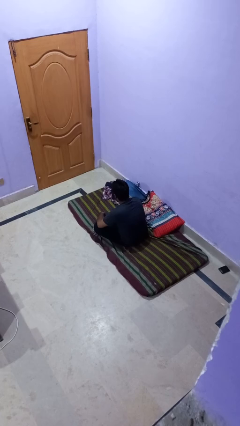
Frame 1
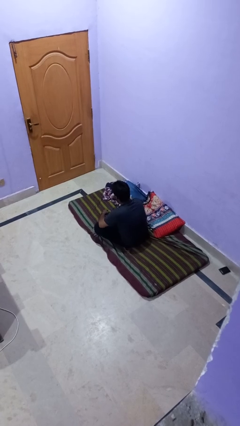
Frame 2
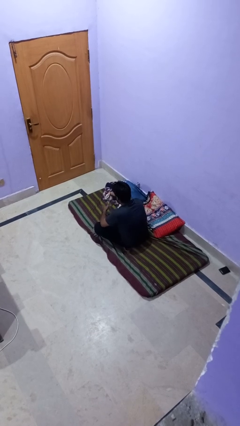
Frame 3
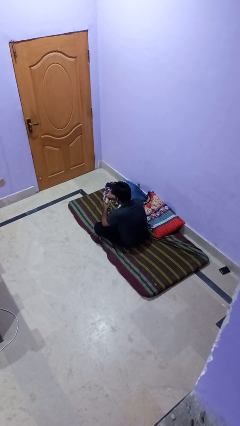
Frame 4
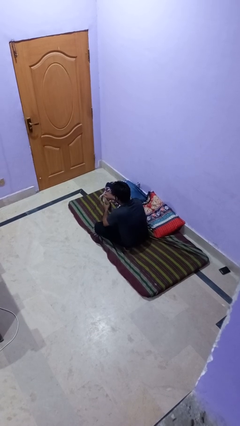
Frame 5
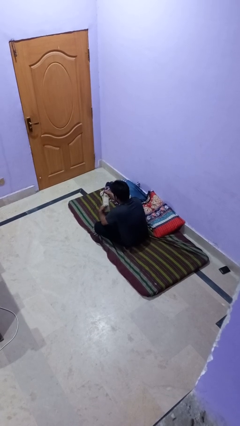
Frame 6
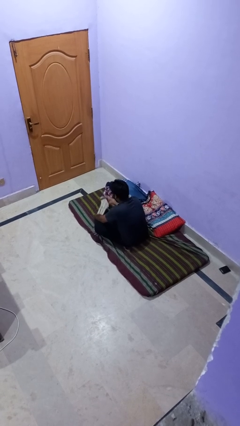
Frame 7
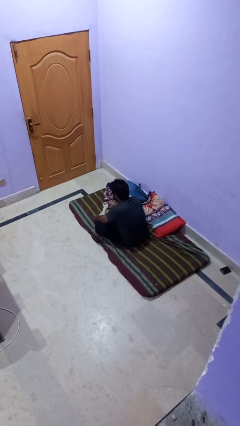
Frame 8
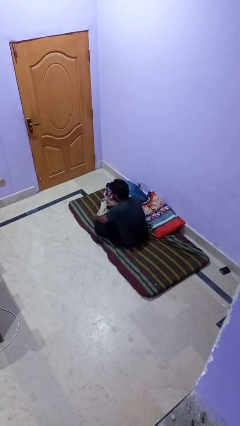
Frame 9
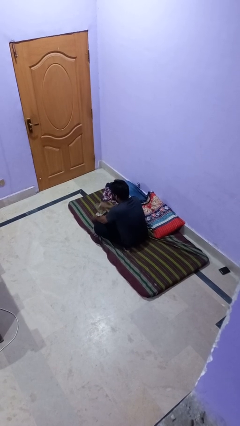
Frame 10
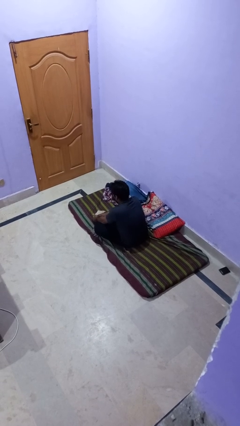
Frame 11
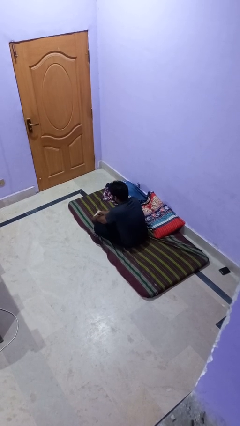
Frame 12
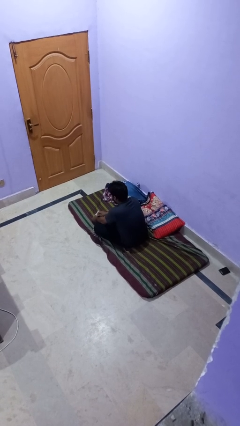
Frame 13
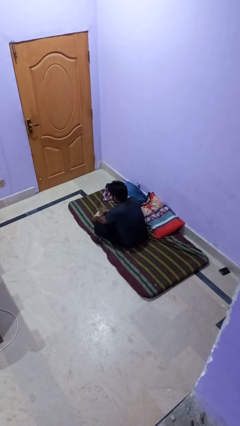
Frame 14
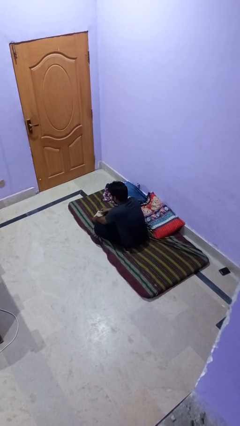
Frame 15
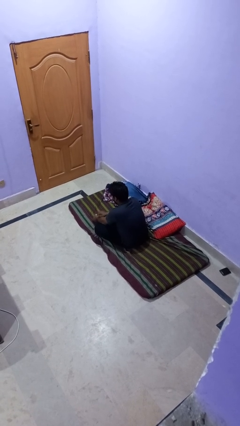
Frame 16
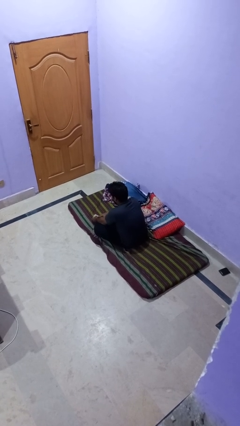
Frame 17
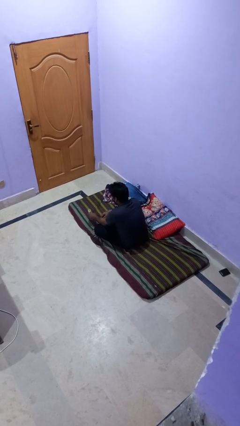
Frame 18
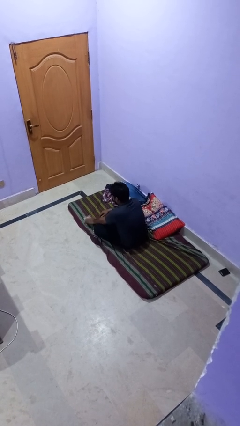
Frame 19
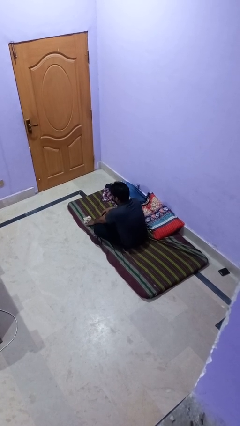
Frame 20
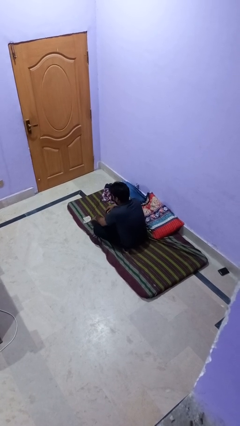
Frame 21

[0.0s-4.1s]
person folds socks

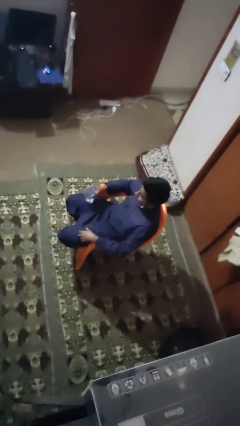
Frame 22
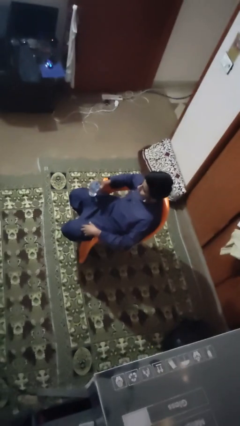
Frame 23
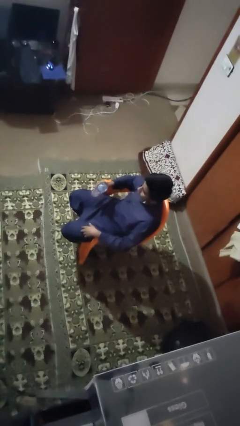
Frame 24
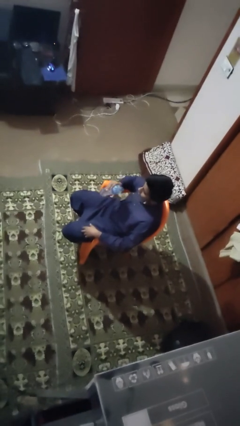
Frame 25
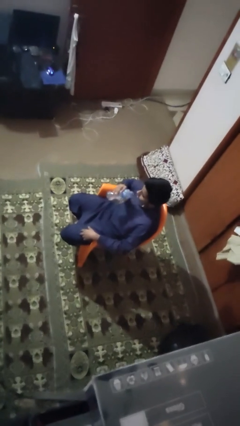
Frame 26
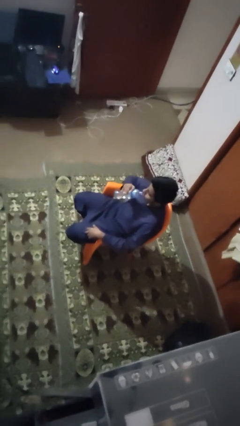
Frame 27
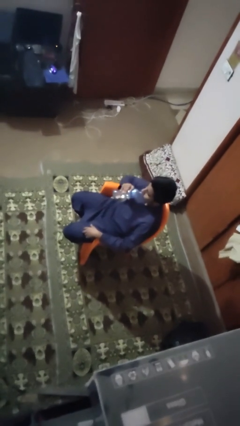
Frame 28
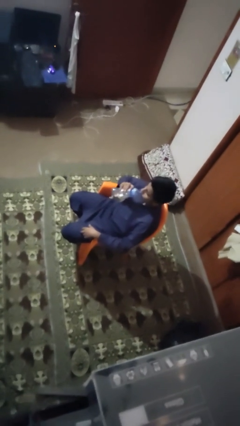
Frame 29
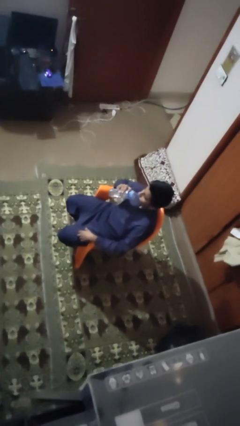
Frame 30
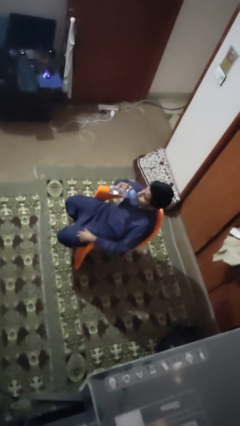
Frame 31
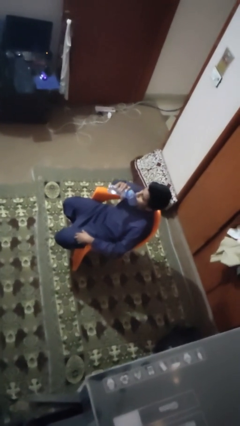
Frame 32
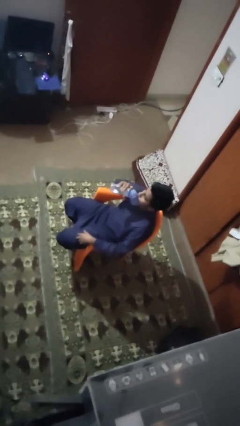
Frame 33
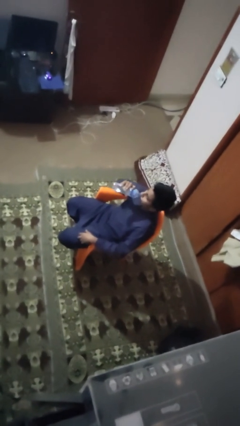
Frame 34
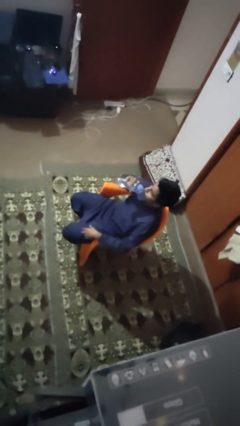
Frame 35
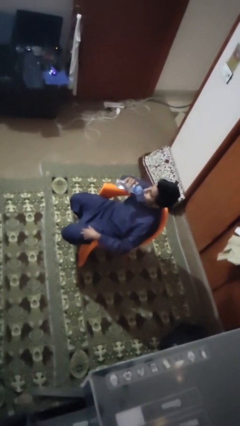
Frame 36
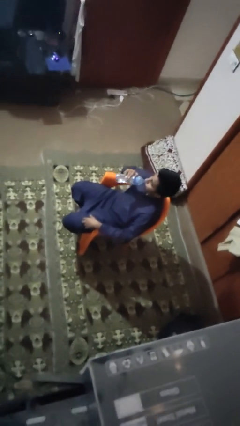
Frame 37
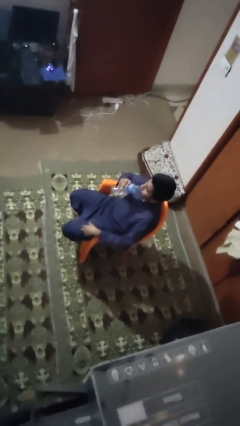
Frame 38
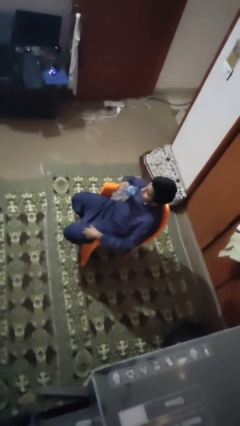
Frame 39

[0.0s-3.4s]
person drinks from bottle

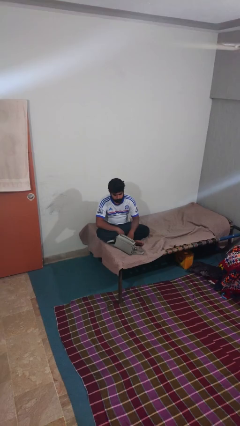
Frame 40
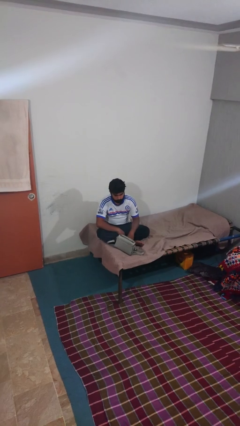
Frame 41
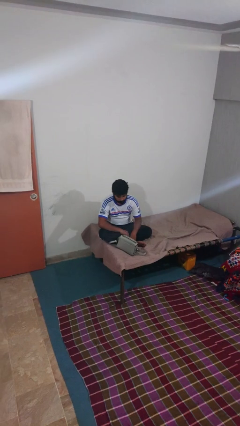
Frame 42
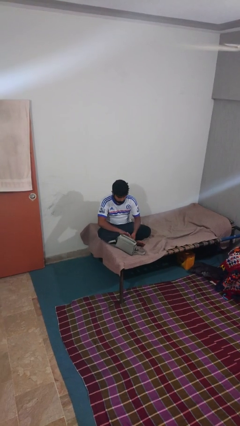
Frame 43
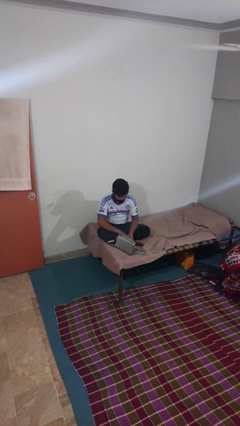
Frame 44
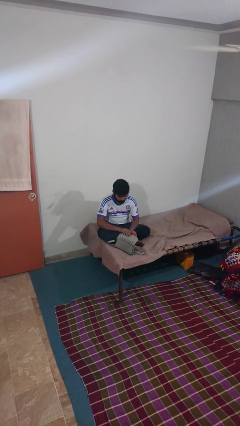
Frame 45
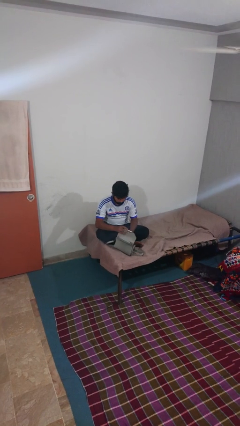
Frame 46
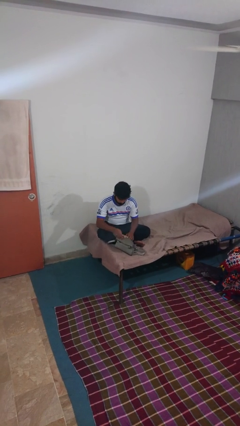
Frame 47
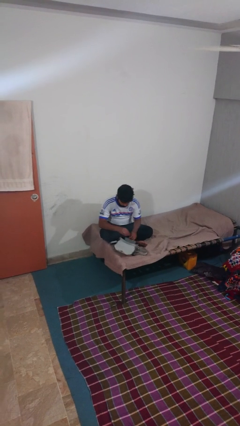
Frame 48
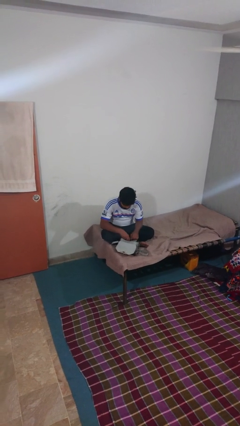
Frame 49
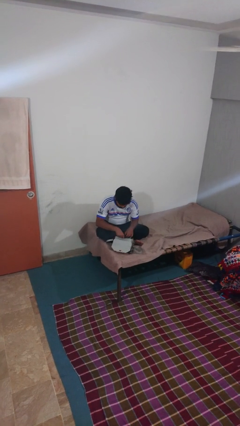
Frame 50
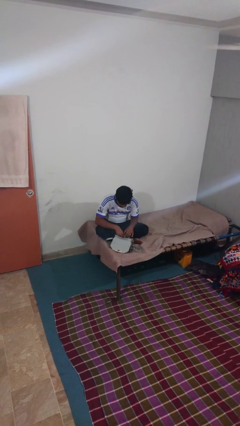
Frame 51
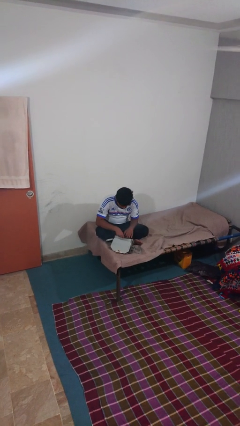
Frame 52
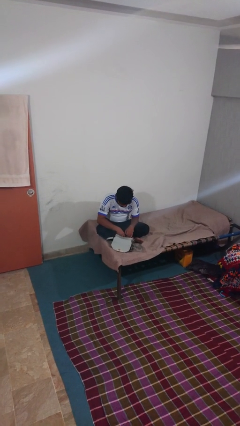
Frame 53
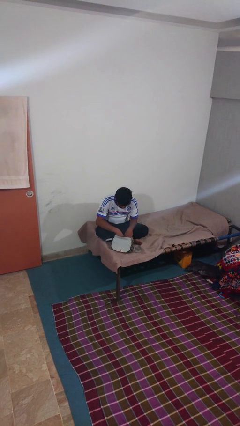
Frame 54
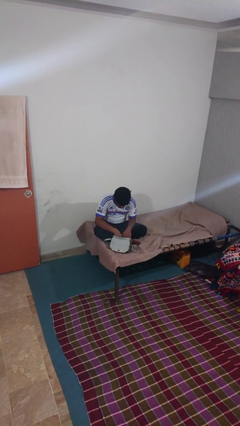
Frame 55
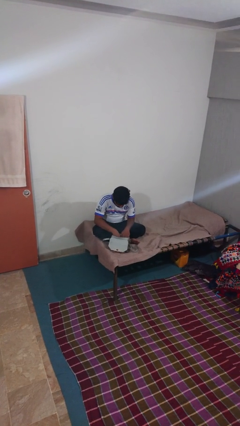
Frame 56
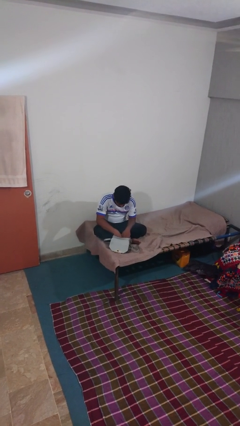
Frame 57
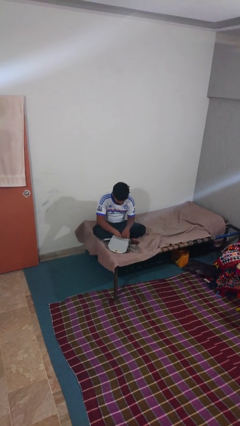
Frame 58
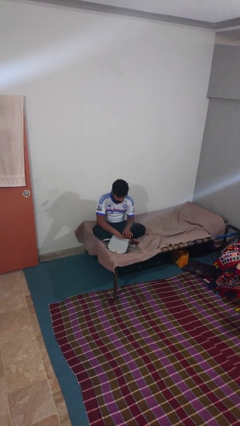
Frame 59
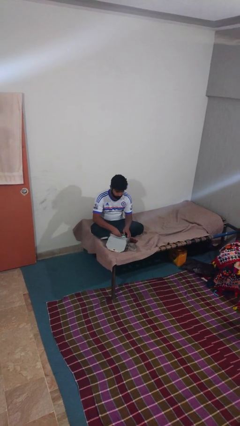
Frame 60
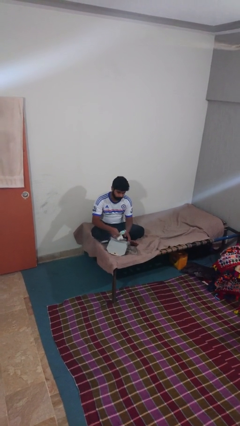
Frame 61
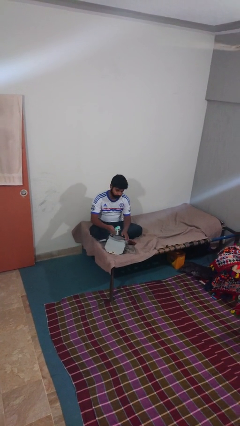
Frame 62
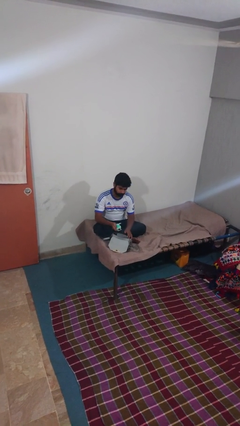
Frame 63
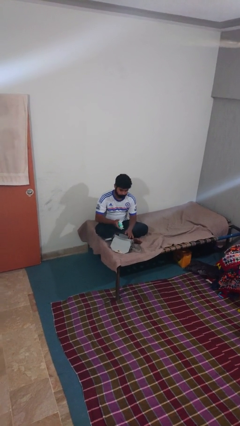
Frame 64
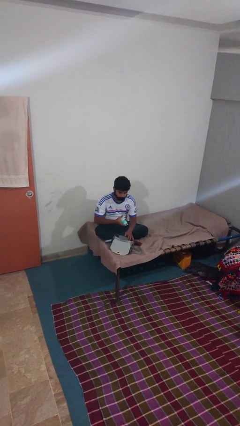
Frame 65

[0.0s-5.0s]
person searches in purse

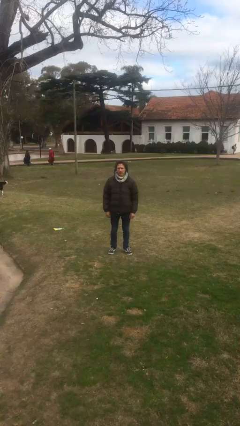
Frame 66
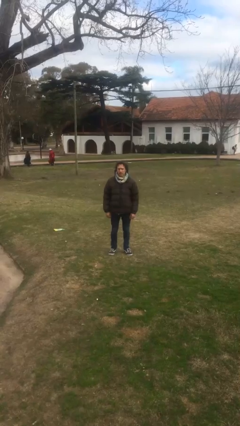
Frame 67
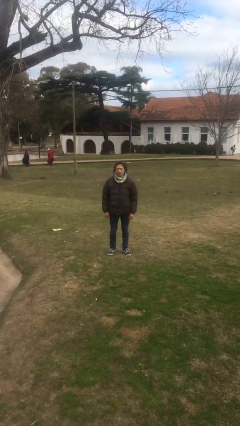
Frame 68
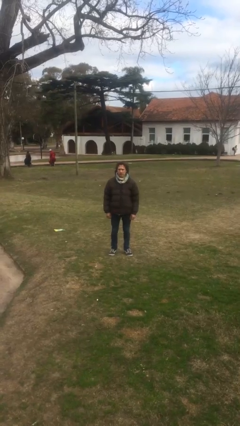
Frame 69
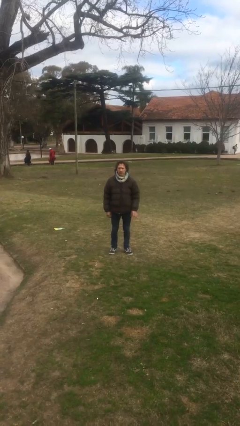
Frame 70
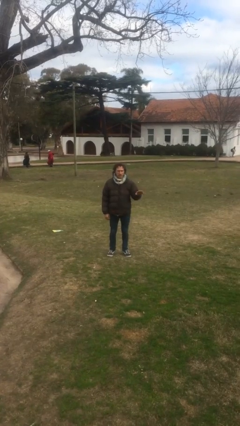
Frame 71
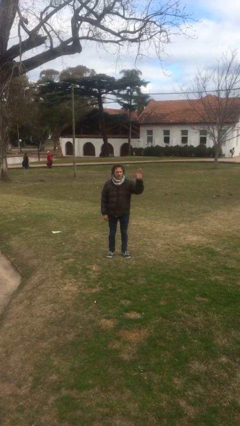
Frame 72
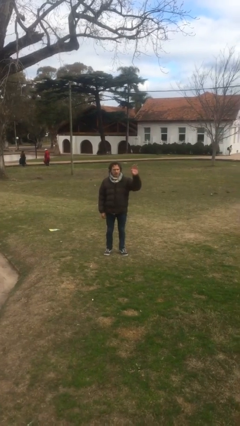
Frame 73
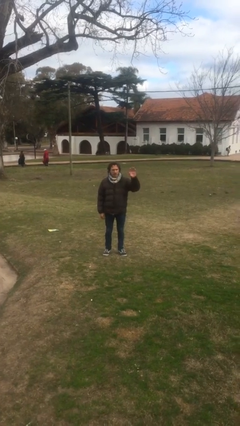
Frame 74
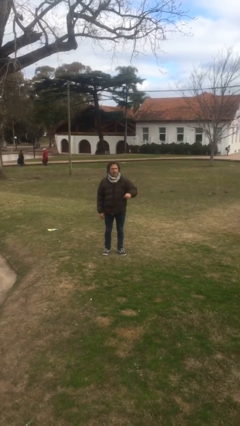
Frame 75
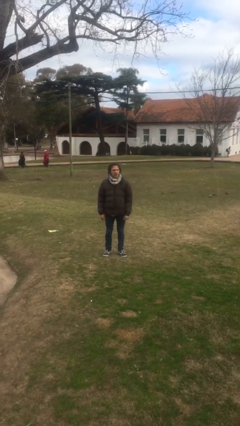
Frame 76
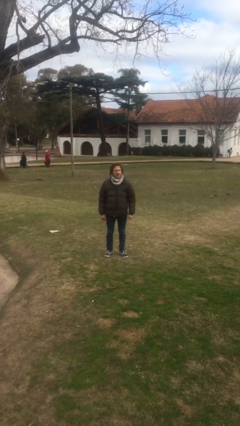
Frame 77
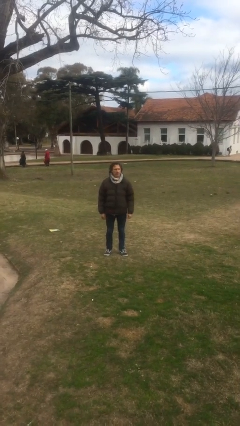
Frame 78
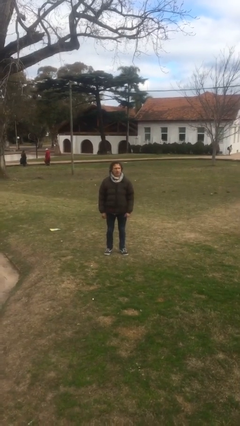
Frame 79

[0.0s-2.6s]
person waves at person

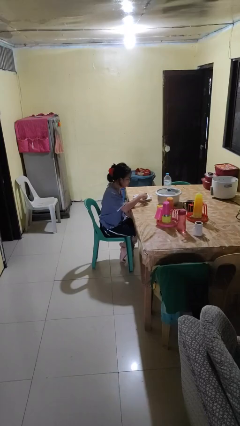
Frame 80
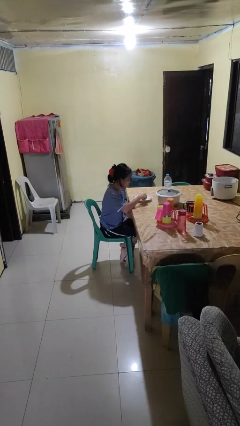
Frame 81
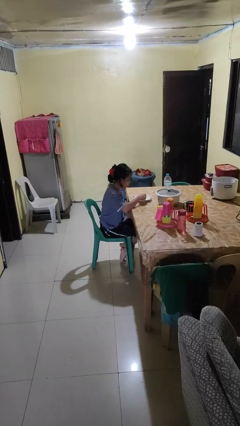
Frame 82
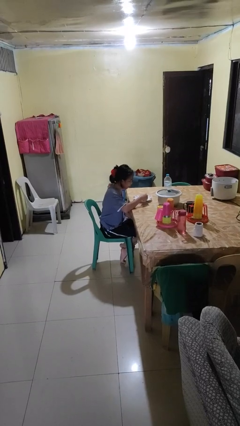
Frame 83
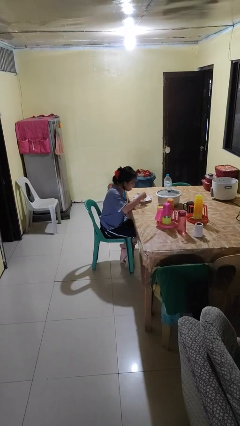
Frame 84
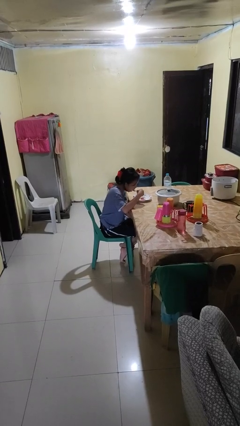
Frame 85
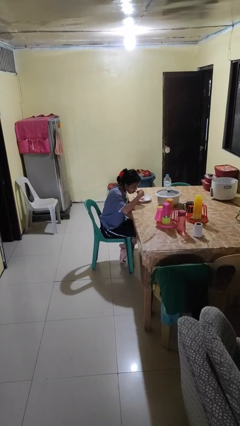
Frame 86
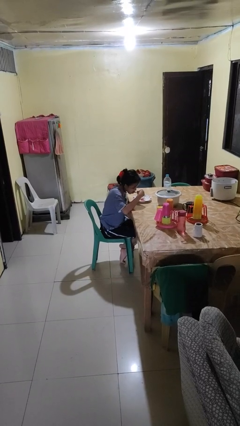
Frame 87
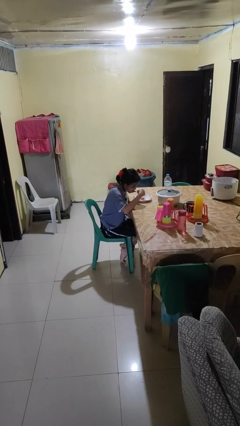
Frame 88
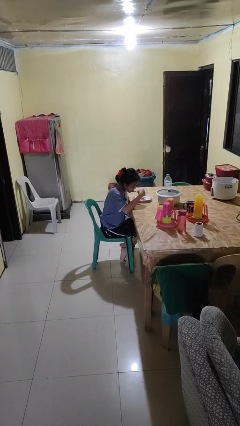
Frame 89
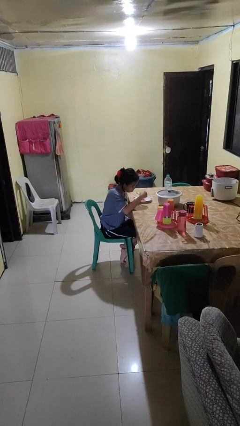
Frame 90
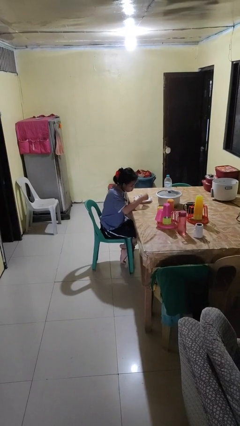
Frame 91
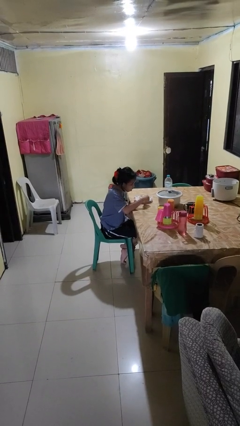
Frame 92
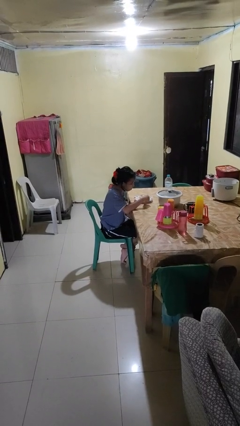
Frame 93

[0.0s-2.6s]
person eats with utensil
